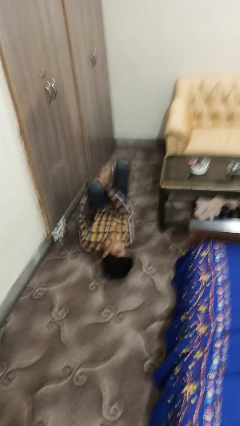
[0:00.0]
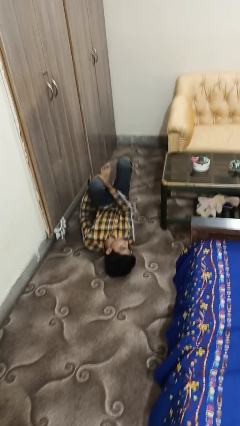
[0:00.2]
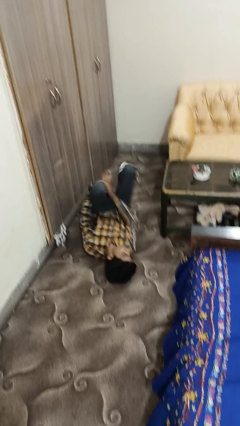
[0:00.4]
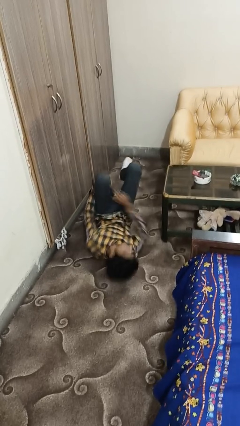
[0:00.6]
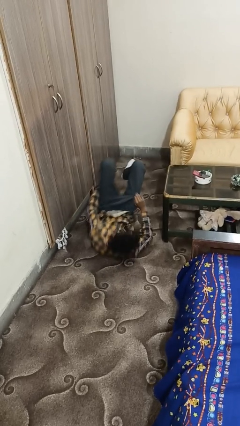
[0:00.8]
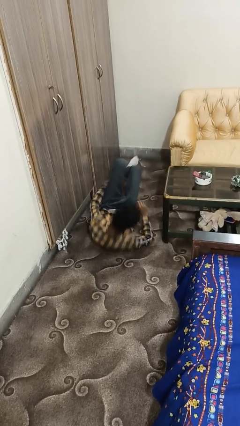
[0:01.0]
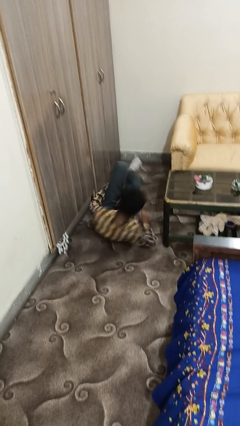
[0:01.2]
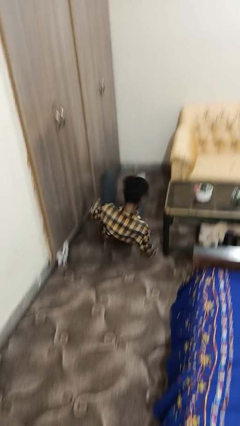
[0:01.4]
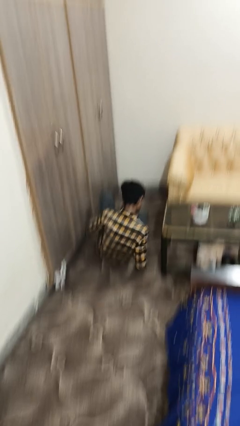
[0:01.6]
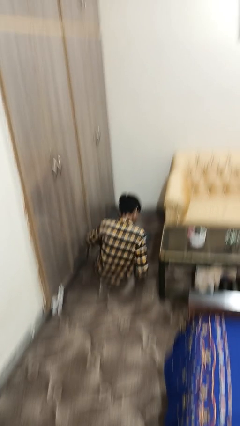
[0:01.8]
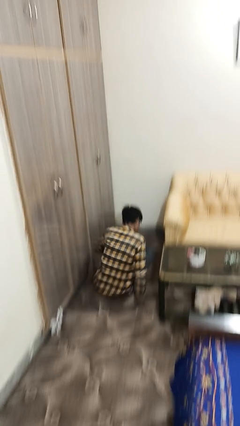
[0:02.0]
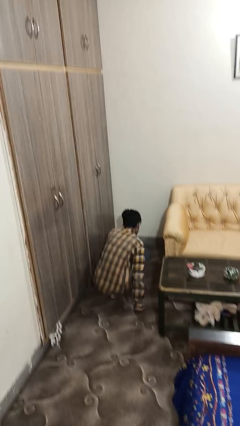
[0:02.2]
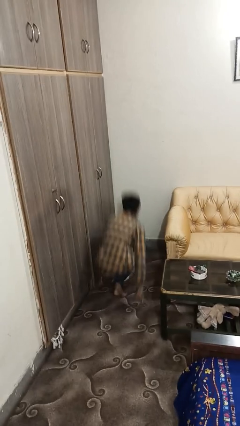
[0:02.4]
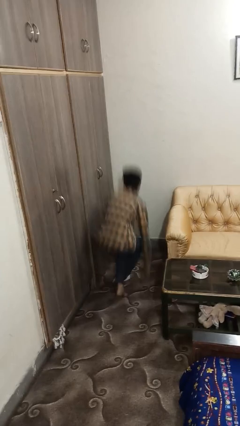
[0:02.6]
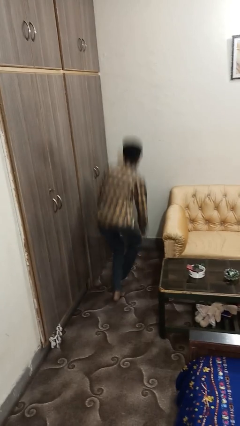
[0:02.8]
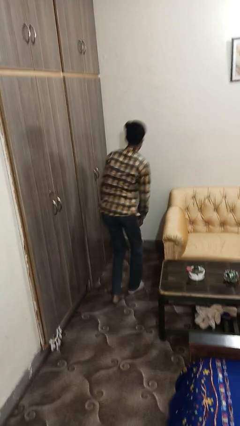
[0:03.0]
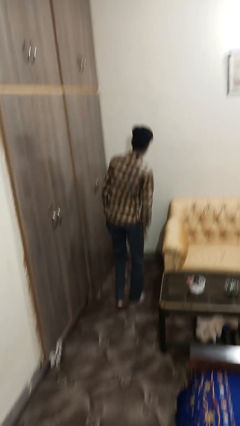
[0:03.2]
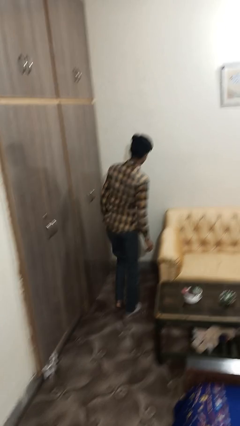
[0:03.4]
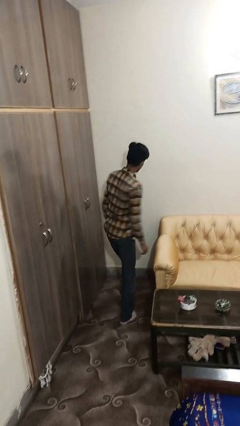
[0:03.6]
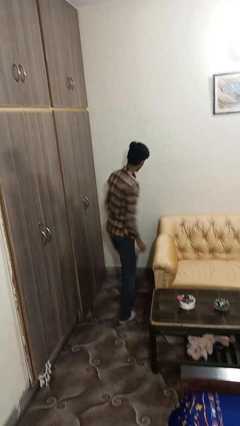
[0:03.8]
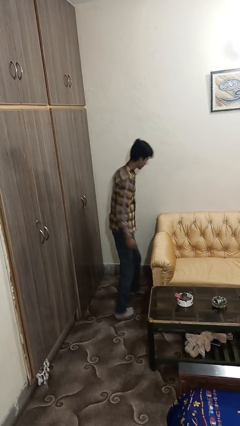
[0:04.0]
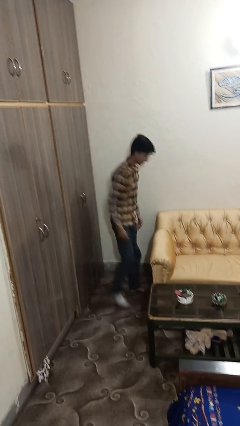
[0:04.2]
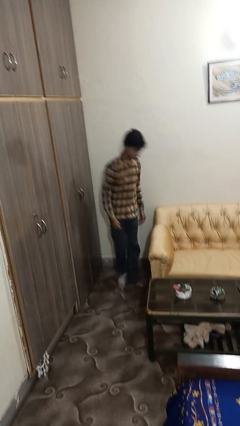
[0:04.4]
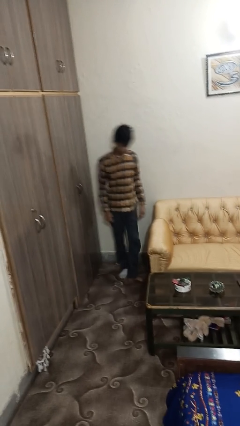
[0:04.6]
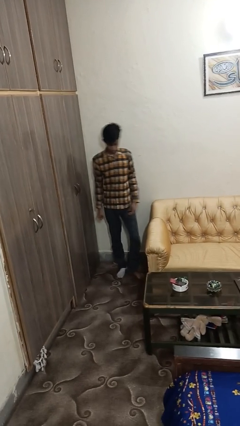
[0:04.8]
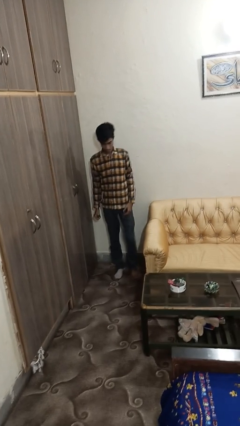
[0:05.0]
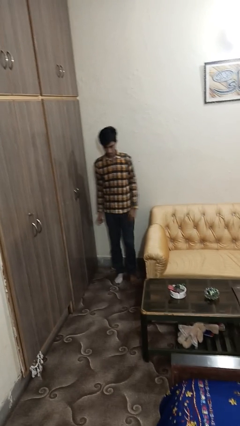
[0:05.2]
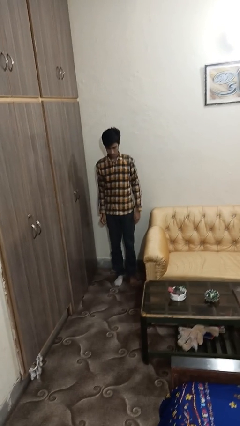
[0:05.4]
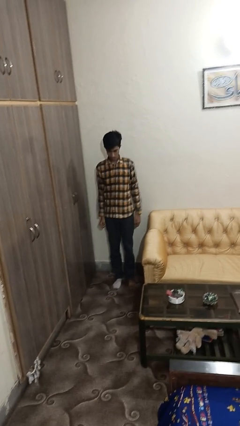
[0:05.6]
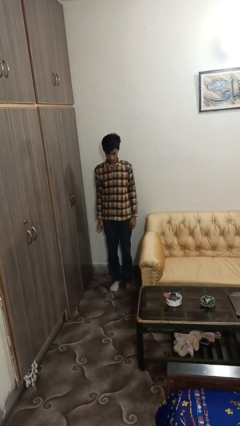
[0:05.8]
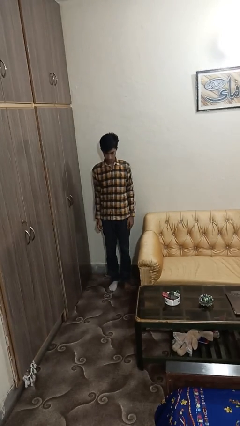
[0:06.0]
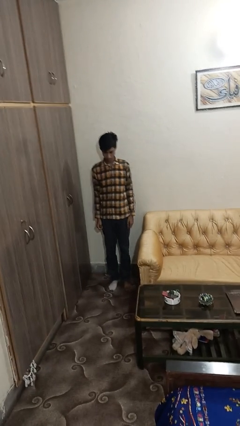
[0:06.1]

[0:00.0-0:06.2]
person stands up from floor

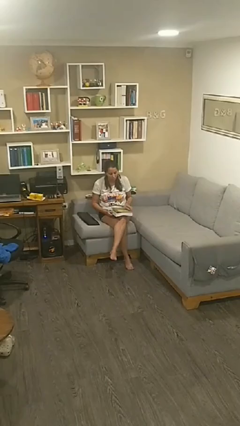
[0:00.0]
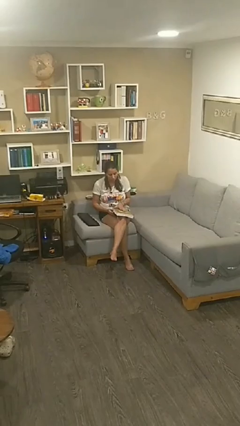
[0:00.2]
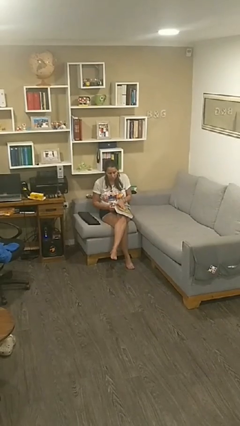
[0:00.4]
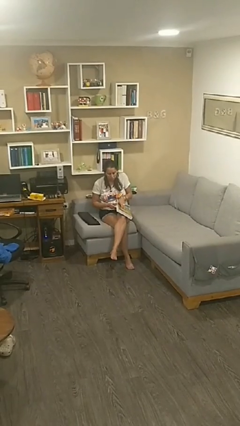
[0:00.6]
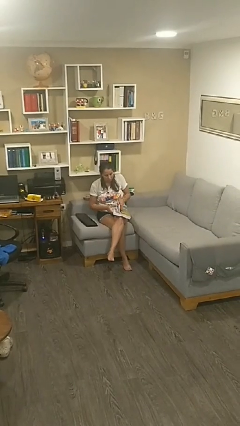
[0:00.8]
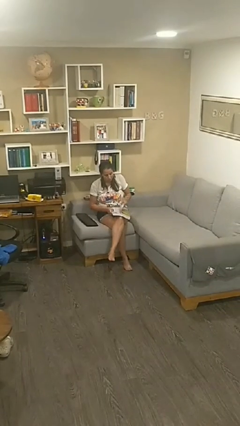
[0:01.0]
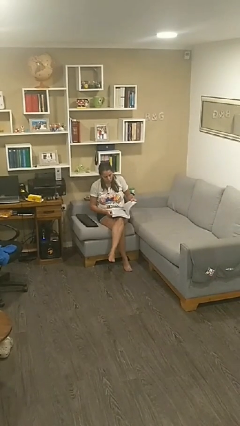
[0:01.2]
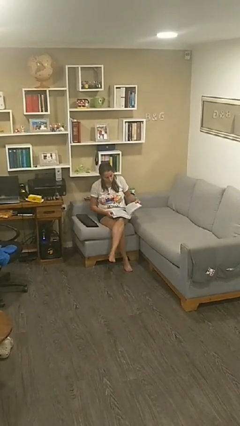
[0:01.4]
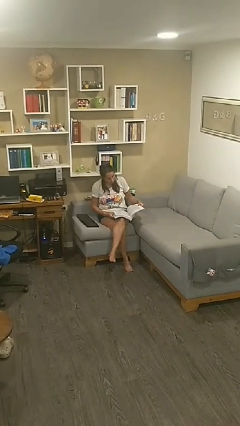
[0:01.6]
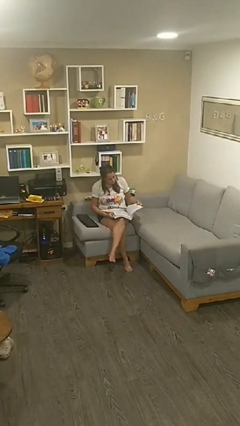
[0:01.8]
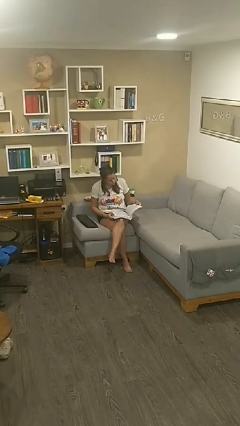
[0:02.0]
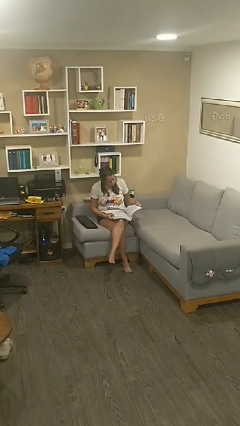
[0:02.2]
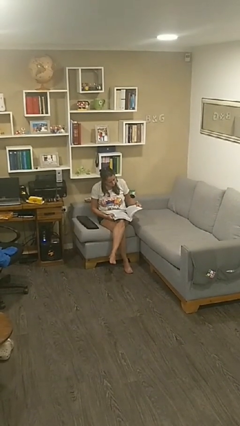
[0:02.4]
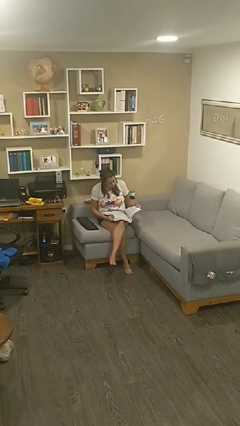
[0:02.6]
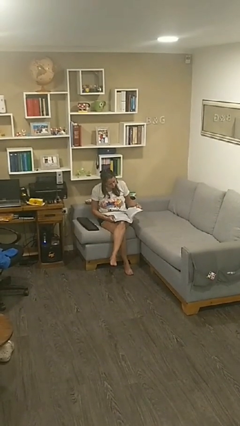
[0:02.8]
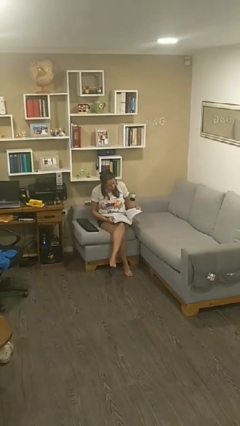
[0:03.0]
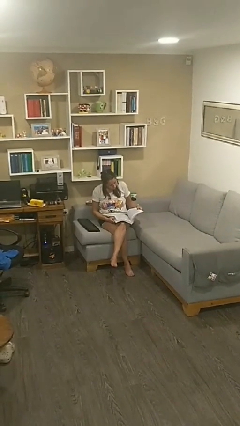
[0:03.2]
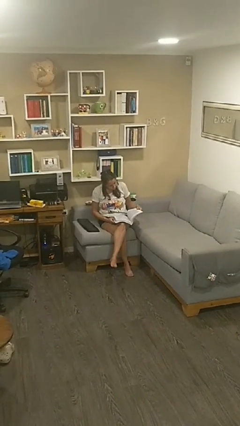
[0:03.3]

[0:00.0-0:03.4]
person reads document

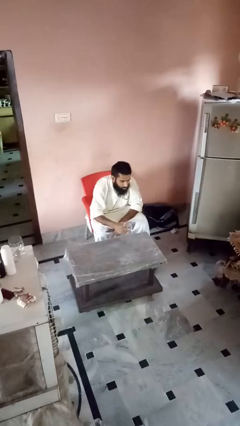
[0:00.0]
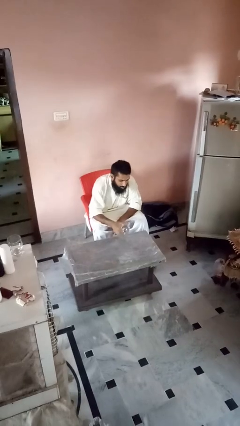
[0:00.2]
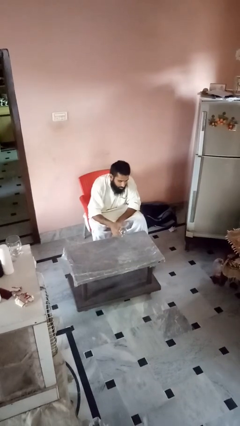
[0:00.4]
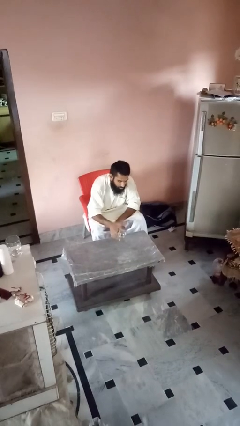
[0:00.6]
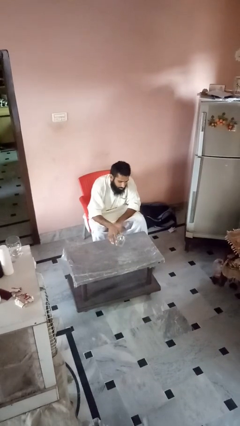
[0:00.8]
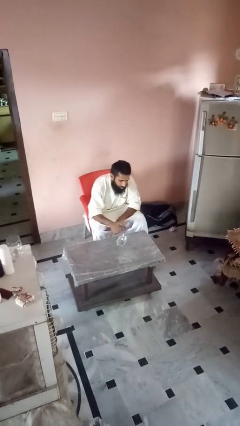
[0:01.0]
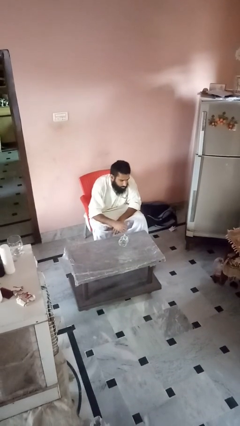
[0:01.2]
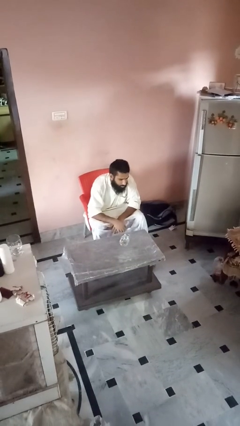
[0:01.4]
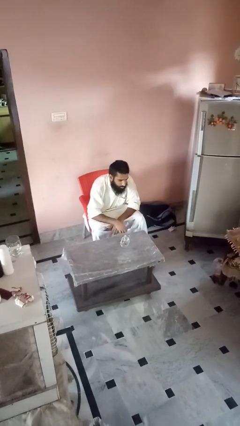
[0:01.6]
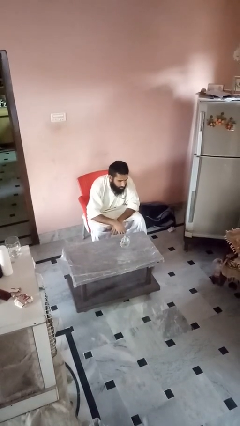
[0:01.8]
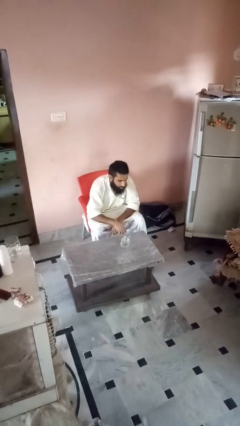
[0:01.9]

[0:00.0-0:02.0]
person spills on table

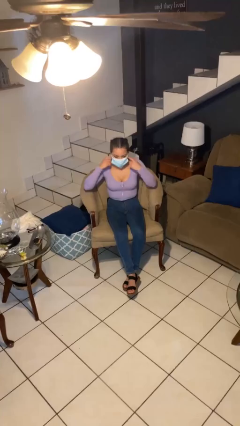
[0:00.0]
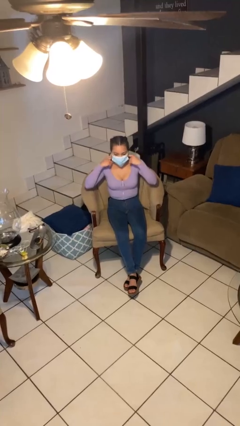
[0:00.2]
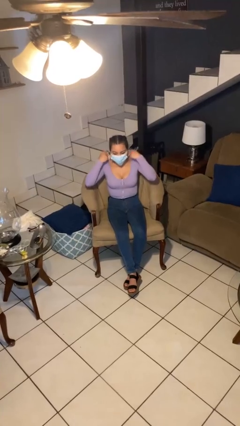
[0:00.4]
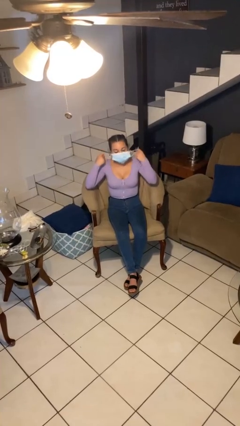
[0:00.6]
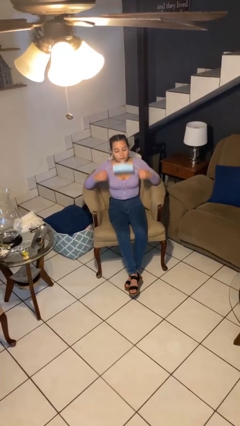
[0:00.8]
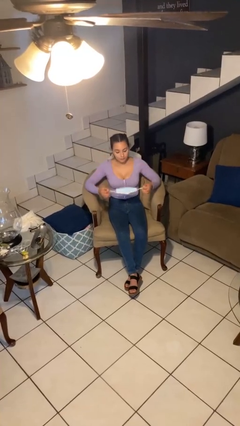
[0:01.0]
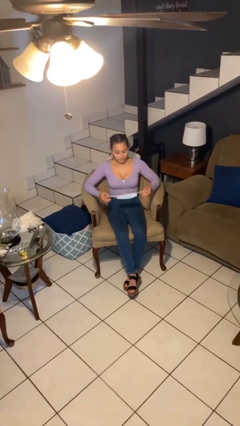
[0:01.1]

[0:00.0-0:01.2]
person takes off facemask

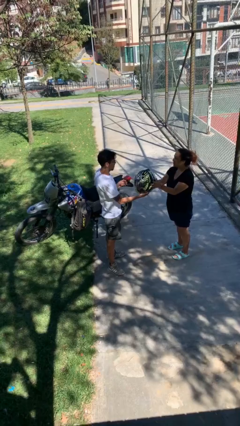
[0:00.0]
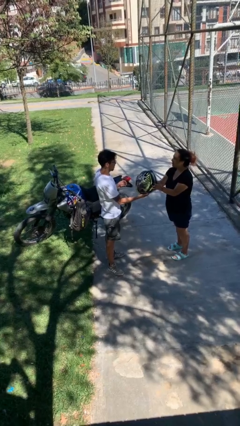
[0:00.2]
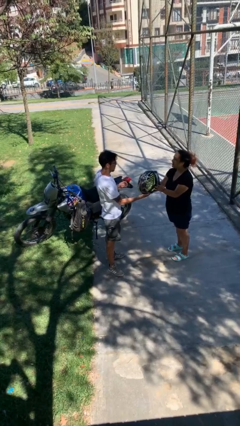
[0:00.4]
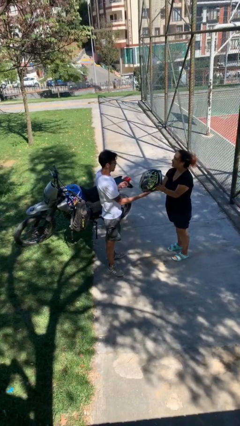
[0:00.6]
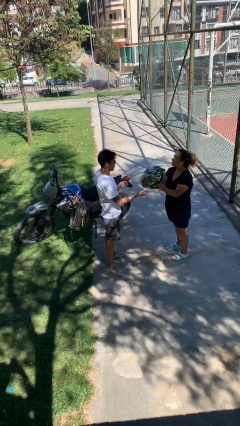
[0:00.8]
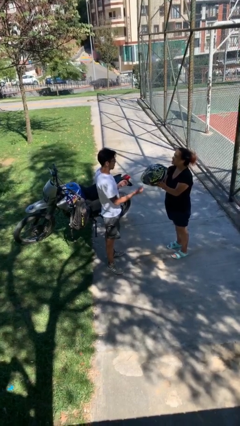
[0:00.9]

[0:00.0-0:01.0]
person transfers object to person

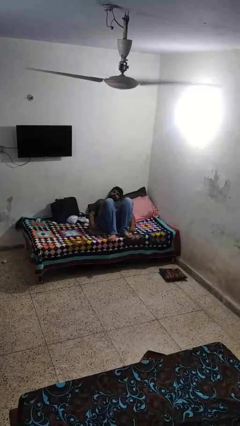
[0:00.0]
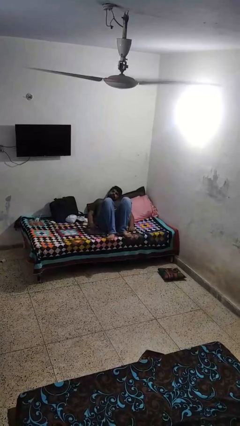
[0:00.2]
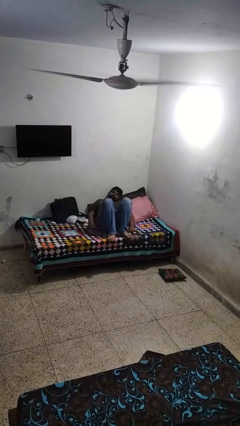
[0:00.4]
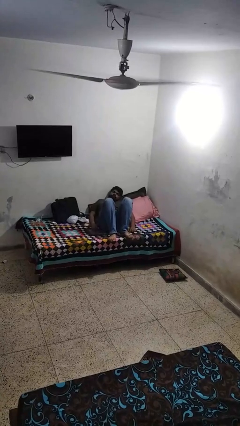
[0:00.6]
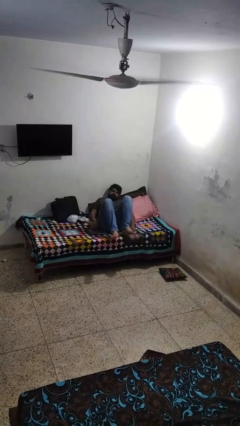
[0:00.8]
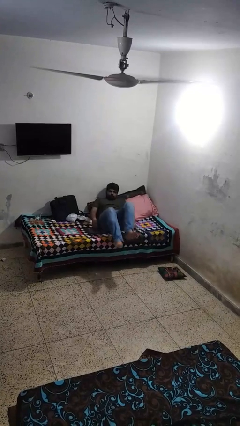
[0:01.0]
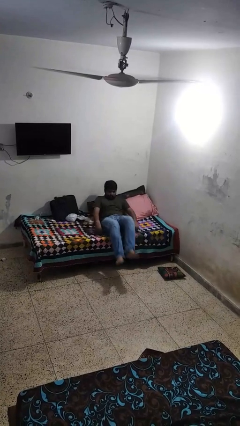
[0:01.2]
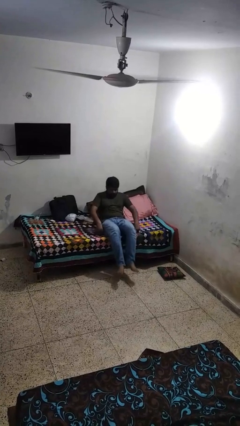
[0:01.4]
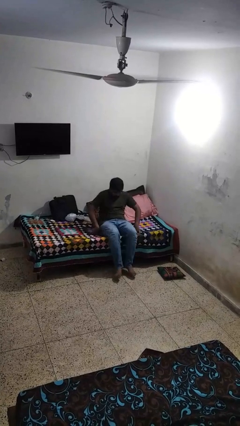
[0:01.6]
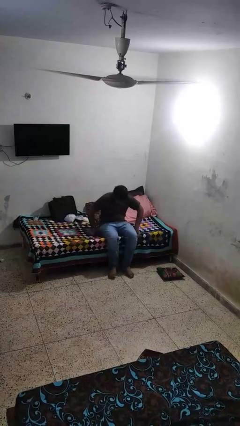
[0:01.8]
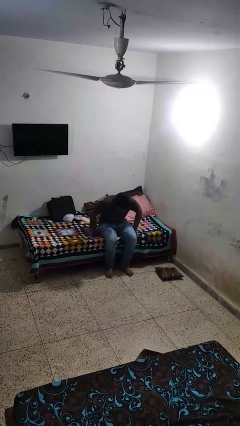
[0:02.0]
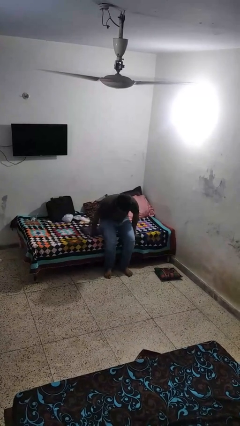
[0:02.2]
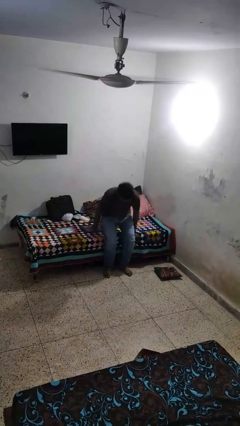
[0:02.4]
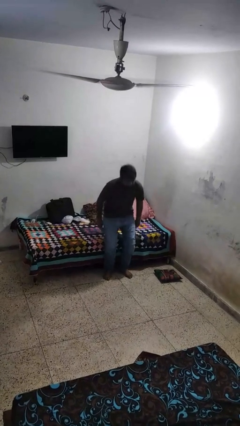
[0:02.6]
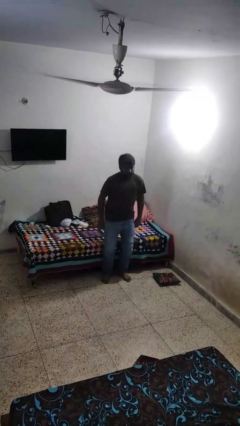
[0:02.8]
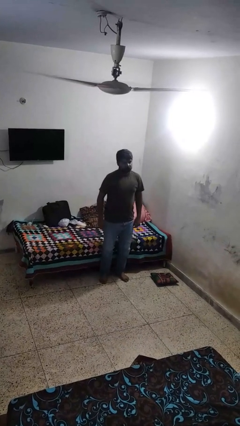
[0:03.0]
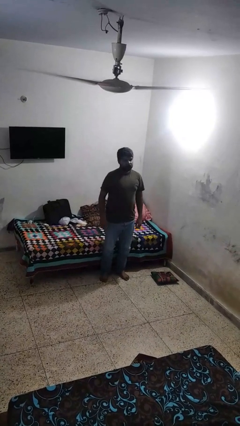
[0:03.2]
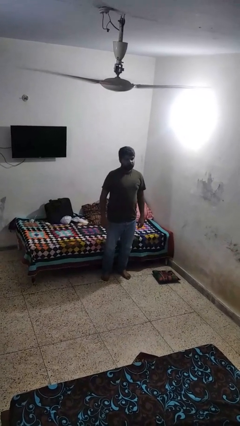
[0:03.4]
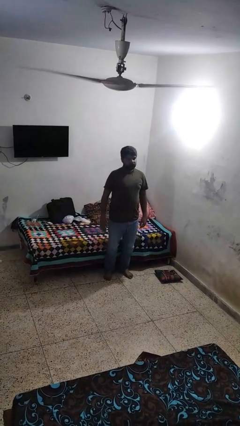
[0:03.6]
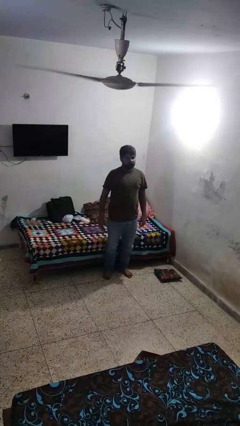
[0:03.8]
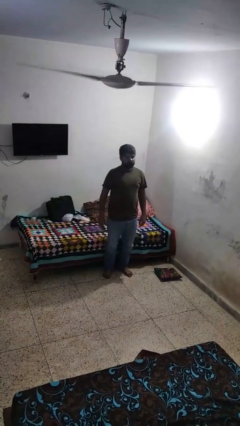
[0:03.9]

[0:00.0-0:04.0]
person stands up
